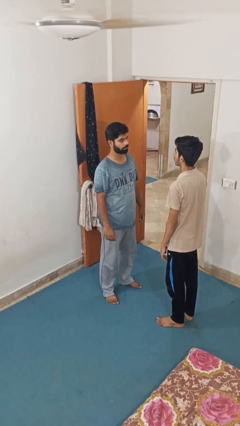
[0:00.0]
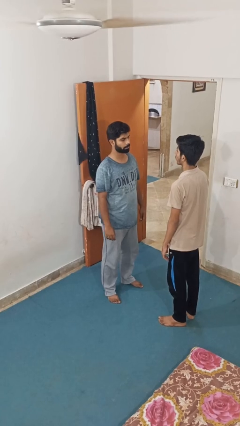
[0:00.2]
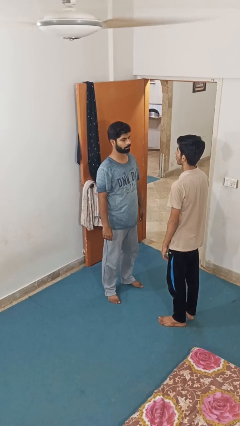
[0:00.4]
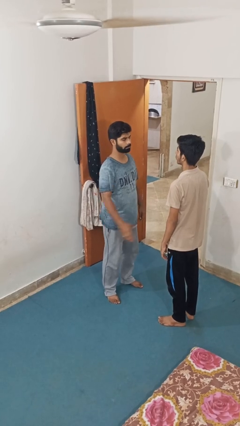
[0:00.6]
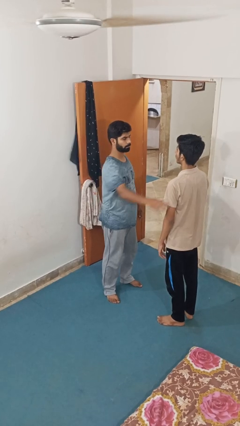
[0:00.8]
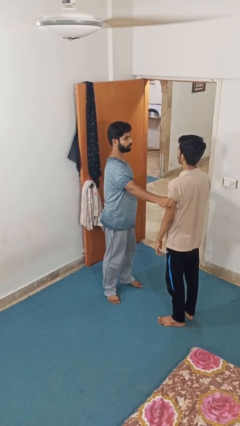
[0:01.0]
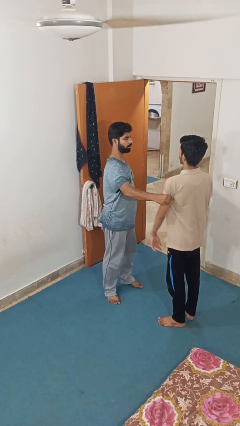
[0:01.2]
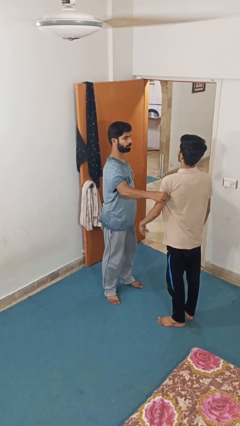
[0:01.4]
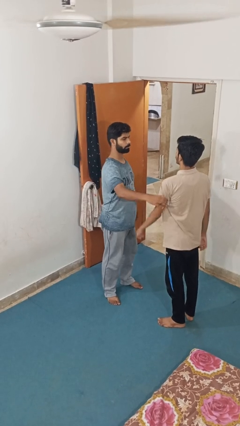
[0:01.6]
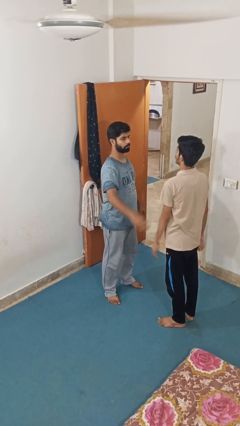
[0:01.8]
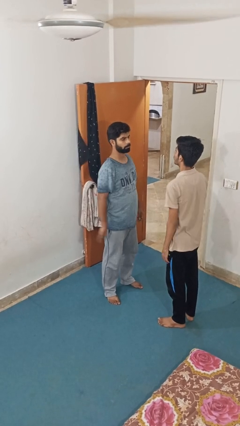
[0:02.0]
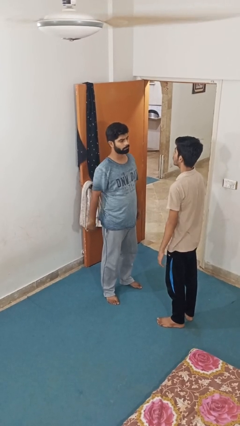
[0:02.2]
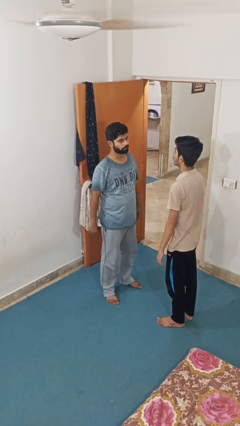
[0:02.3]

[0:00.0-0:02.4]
person grabs person by bicep

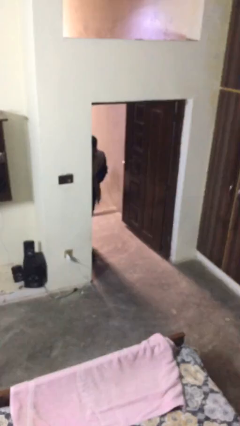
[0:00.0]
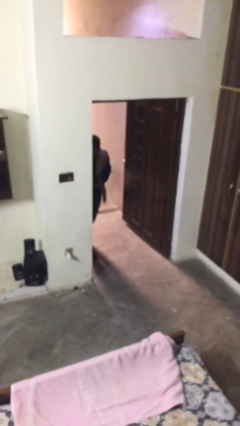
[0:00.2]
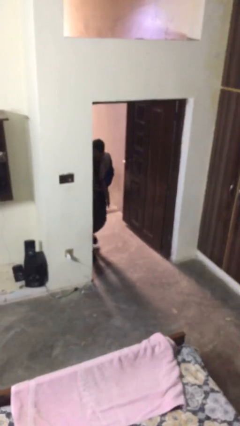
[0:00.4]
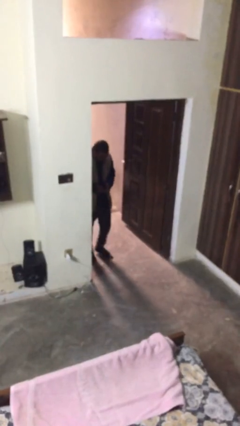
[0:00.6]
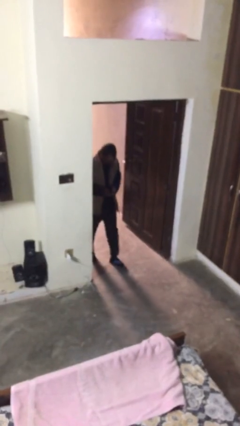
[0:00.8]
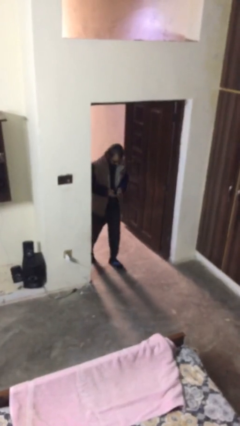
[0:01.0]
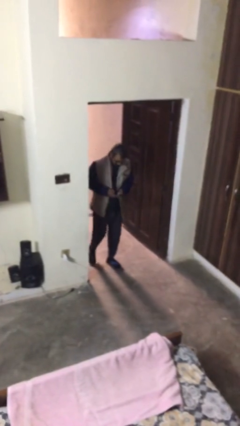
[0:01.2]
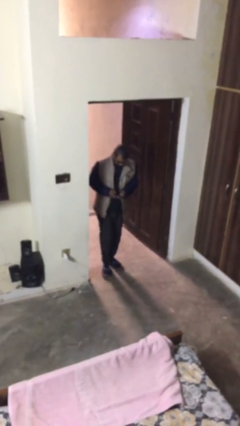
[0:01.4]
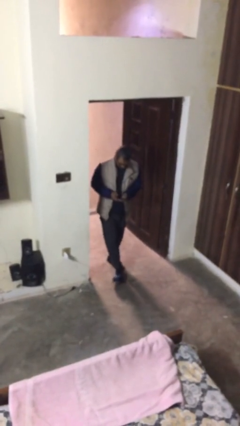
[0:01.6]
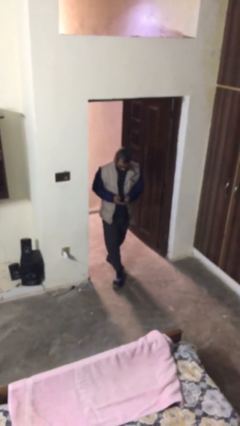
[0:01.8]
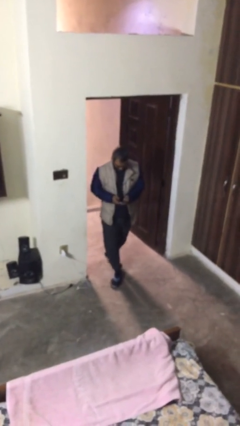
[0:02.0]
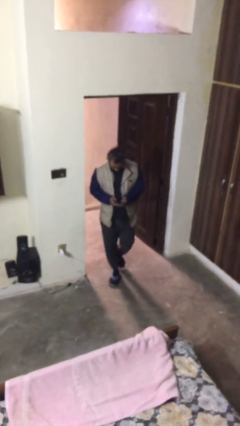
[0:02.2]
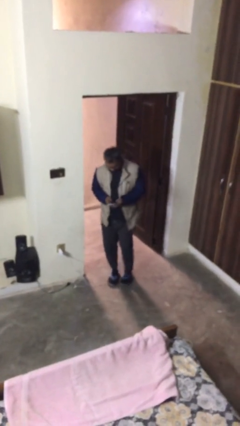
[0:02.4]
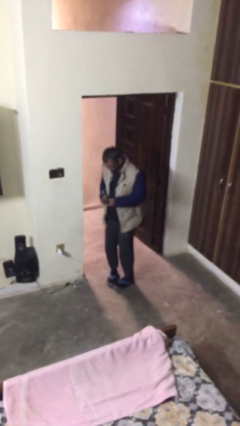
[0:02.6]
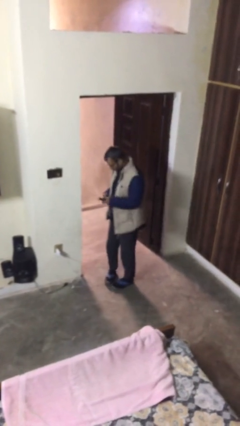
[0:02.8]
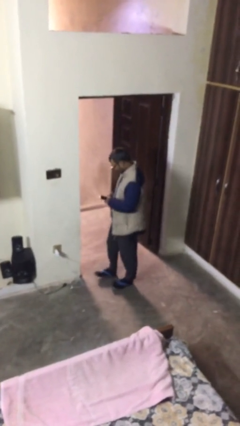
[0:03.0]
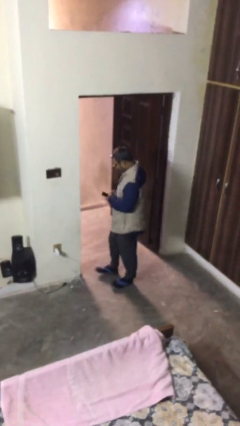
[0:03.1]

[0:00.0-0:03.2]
person enters scene through structure

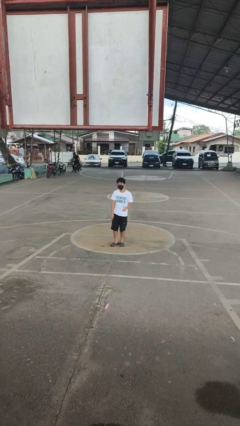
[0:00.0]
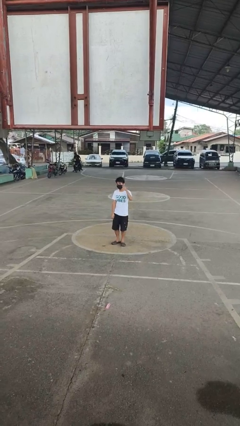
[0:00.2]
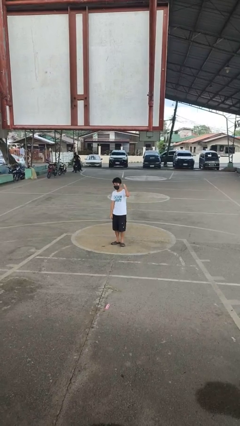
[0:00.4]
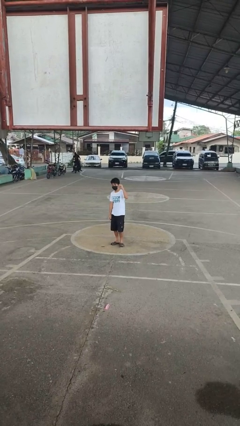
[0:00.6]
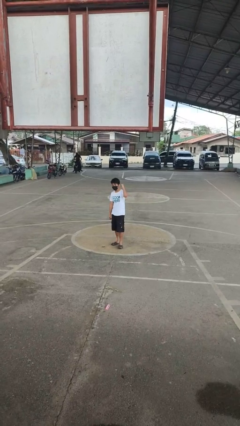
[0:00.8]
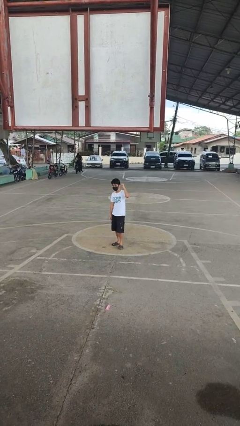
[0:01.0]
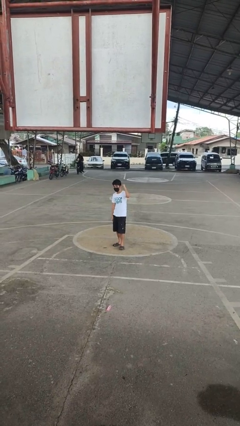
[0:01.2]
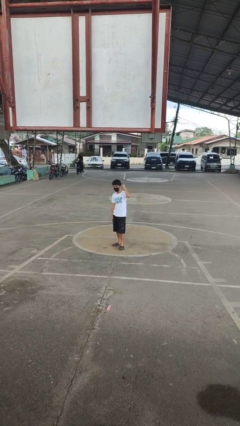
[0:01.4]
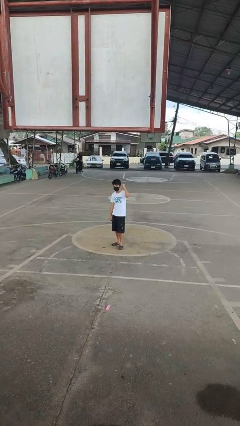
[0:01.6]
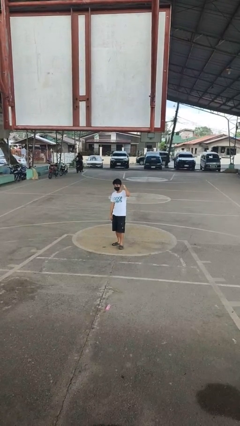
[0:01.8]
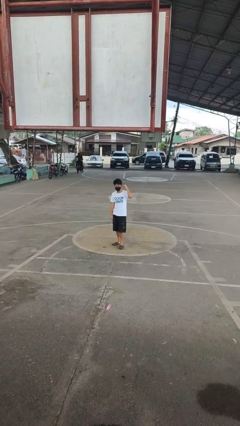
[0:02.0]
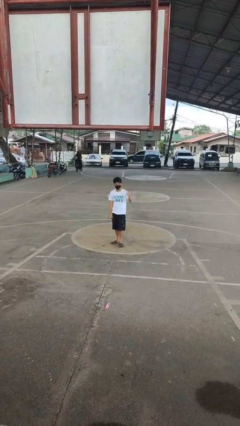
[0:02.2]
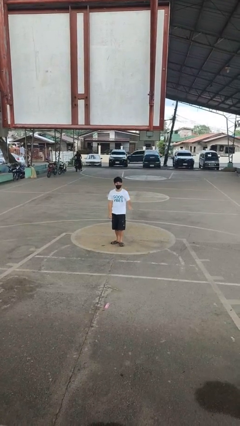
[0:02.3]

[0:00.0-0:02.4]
person gestures behind me

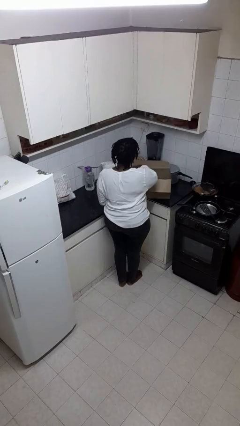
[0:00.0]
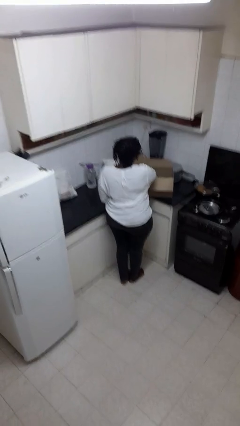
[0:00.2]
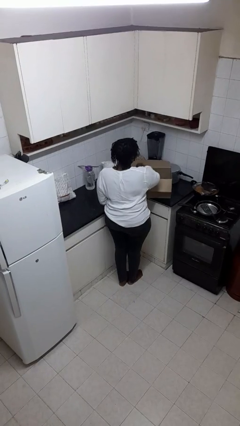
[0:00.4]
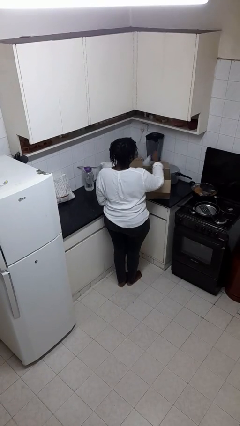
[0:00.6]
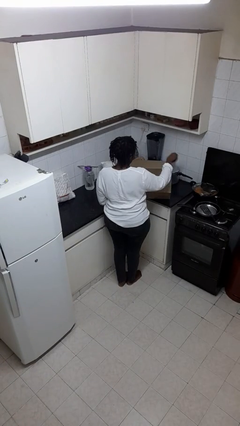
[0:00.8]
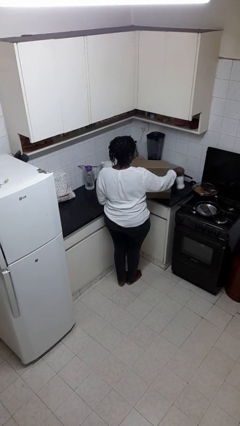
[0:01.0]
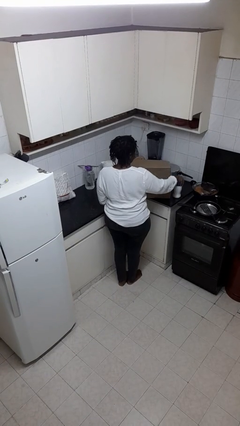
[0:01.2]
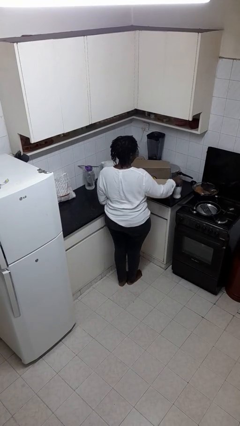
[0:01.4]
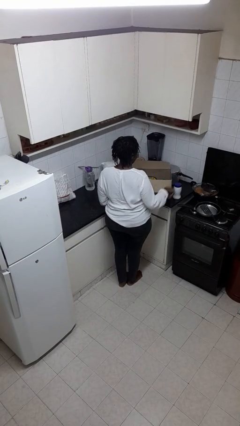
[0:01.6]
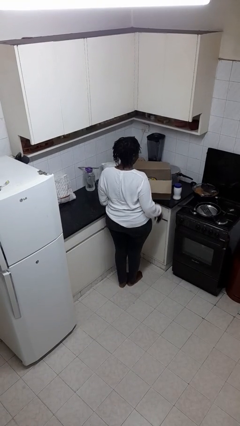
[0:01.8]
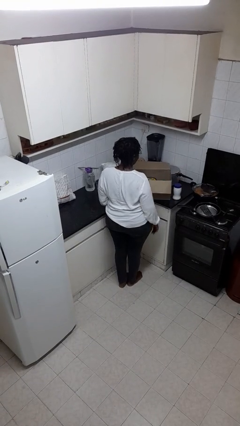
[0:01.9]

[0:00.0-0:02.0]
person takes object from box

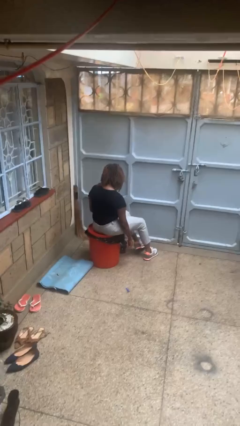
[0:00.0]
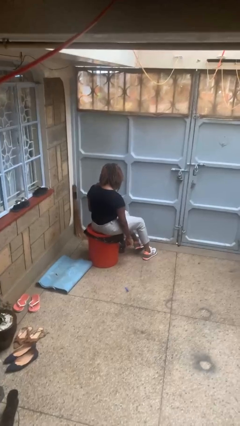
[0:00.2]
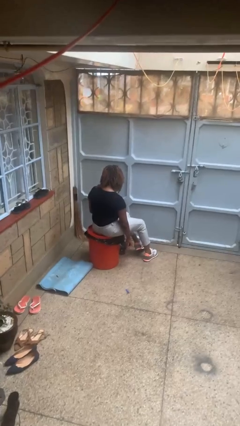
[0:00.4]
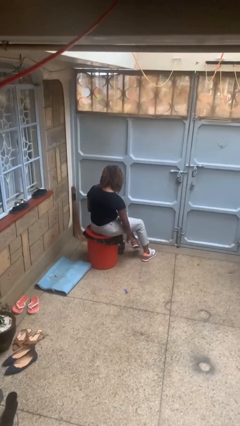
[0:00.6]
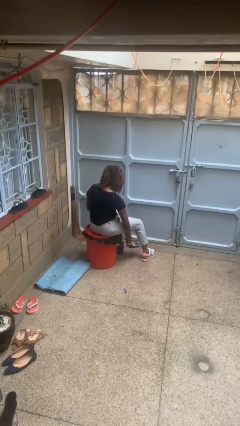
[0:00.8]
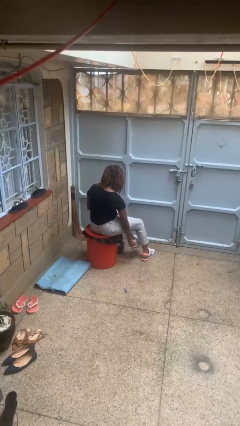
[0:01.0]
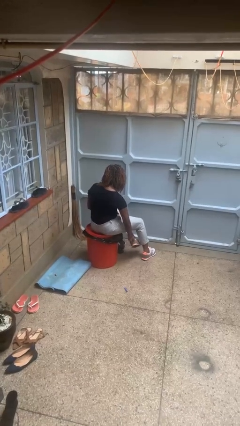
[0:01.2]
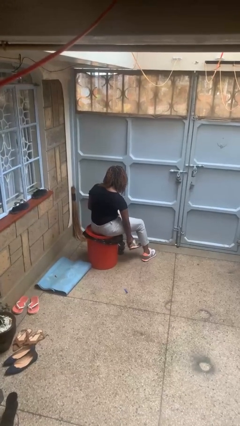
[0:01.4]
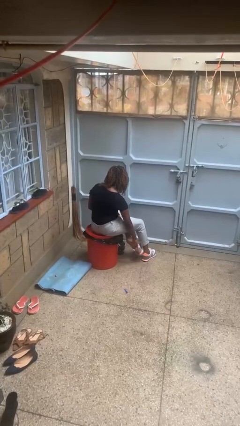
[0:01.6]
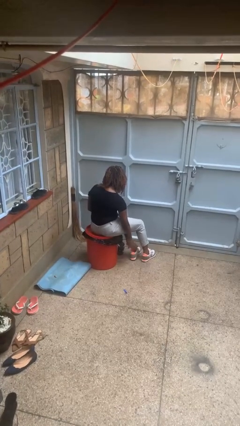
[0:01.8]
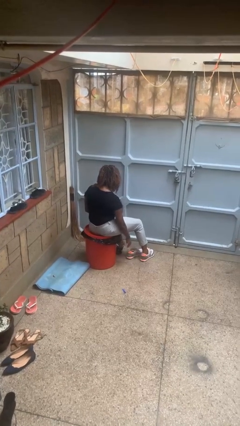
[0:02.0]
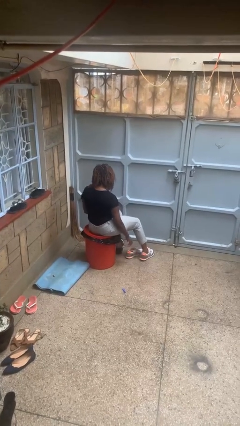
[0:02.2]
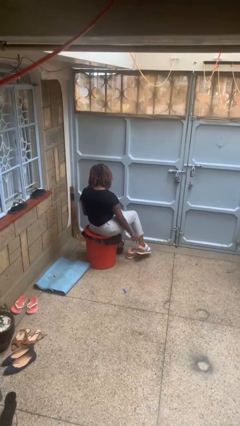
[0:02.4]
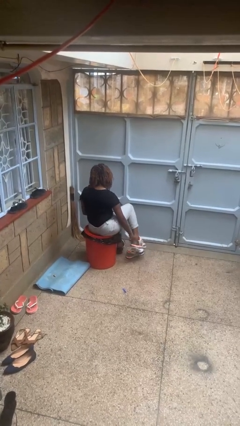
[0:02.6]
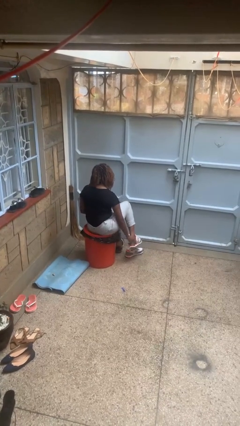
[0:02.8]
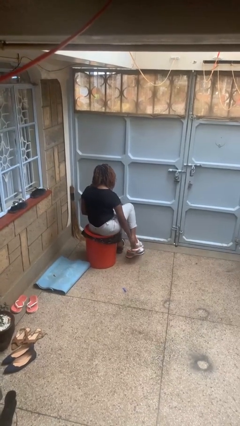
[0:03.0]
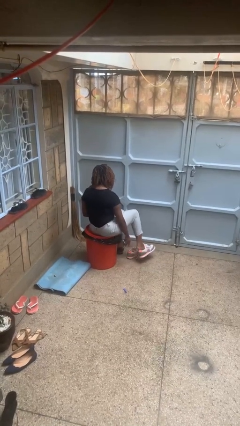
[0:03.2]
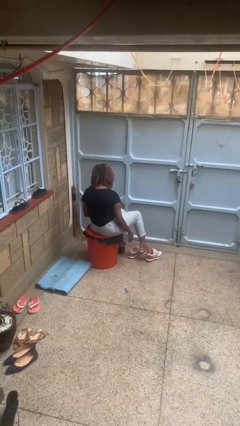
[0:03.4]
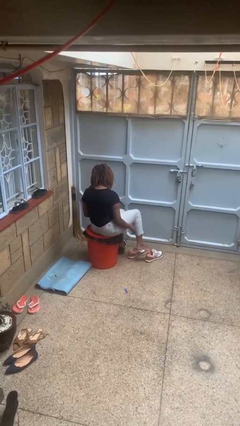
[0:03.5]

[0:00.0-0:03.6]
person takes off shoes

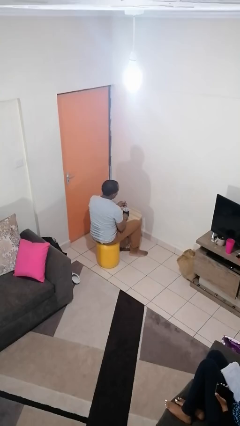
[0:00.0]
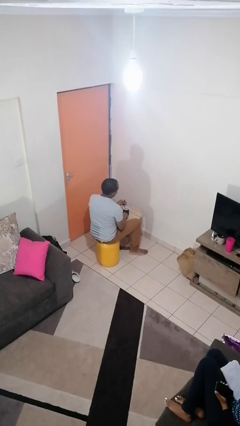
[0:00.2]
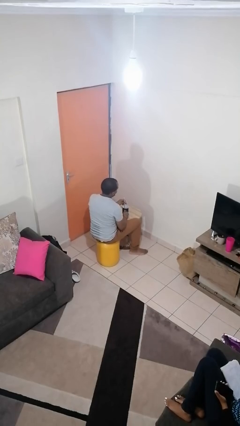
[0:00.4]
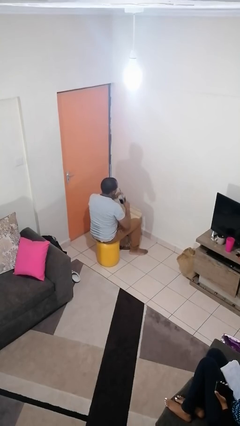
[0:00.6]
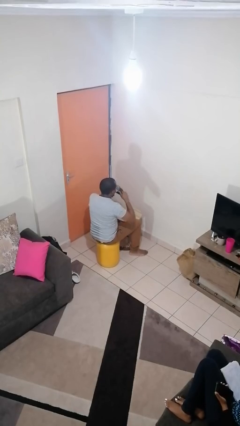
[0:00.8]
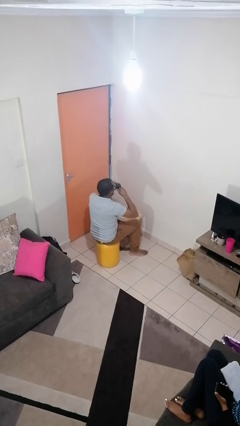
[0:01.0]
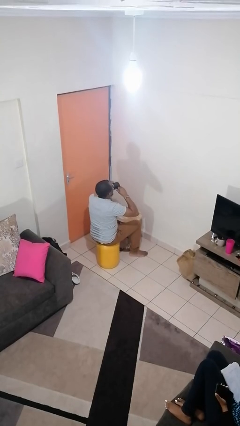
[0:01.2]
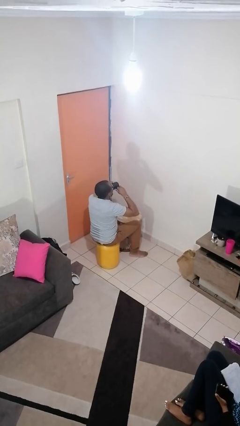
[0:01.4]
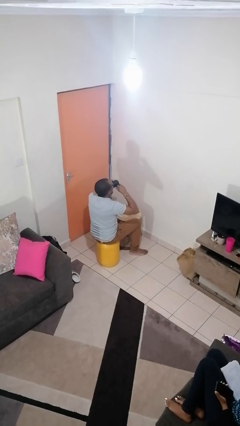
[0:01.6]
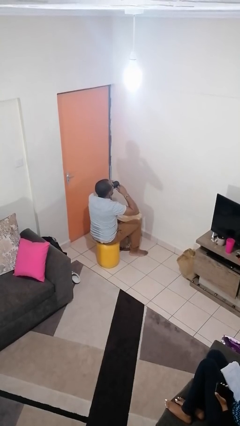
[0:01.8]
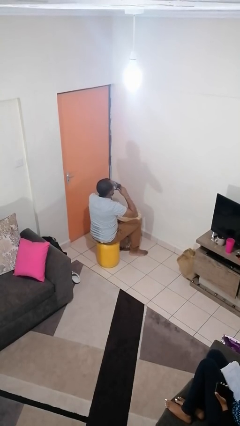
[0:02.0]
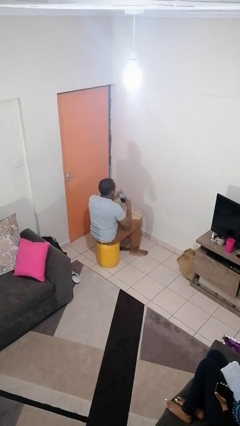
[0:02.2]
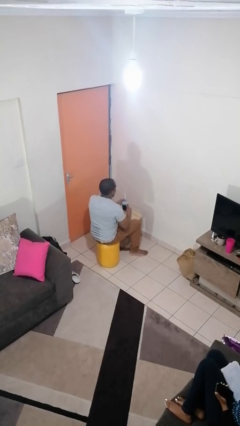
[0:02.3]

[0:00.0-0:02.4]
person drinks from mug

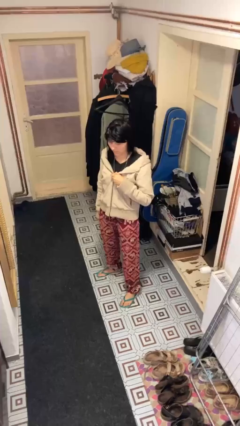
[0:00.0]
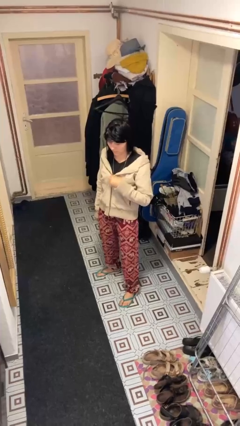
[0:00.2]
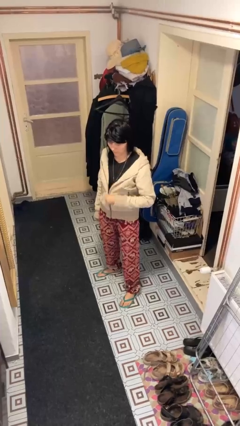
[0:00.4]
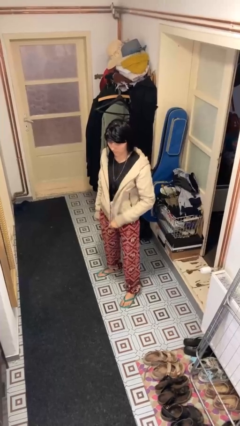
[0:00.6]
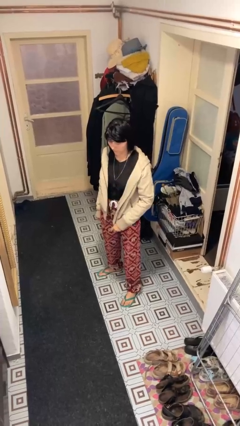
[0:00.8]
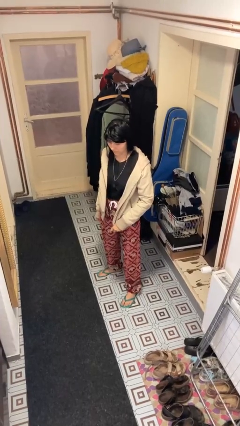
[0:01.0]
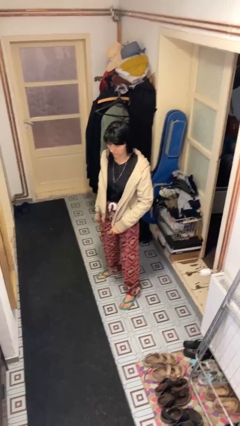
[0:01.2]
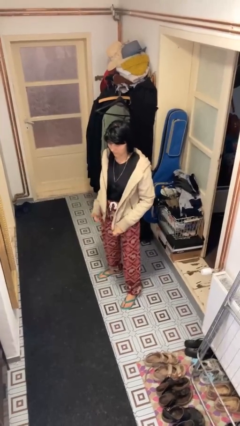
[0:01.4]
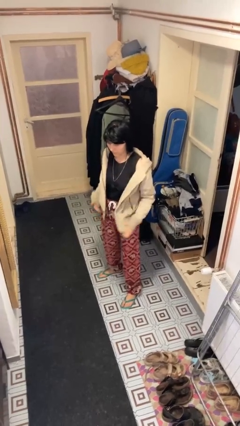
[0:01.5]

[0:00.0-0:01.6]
person unzips jacket
